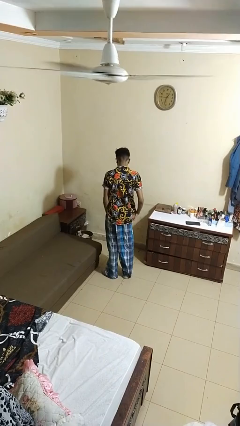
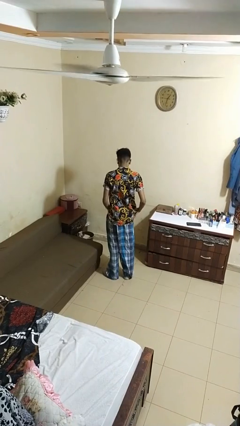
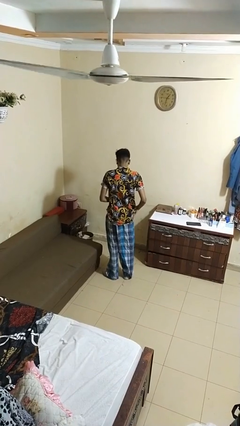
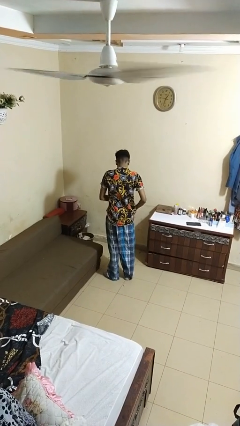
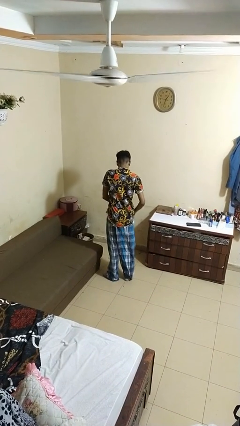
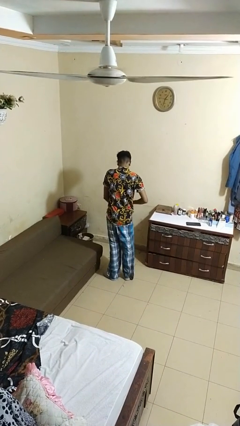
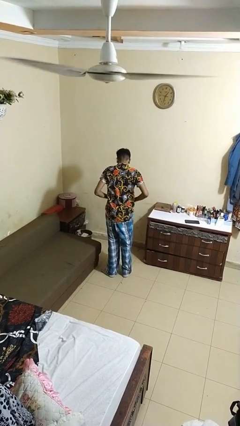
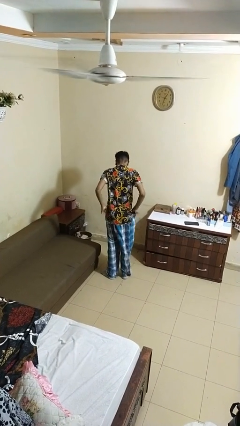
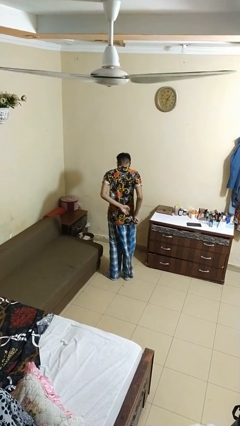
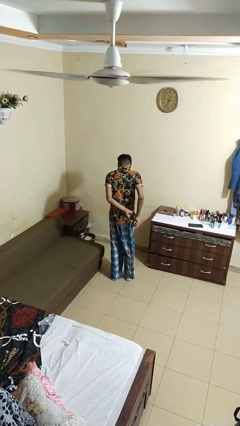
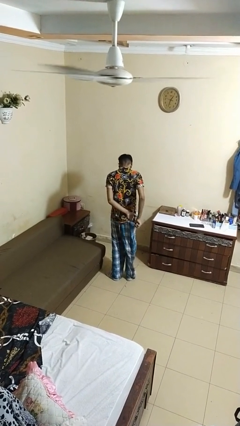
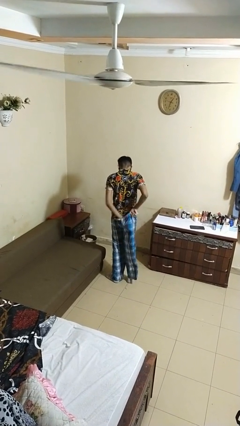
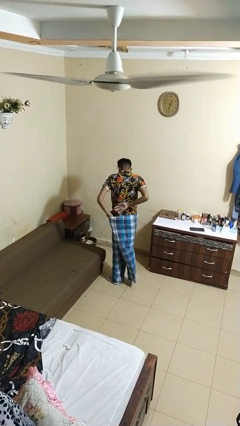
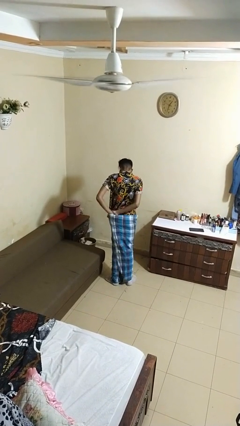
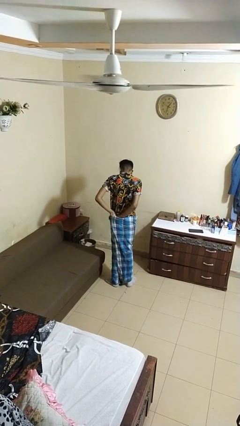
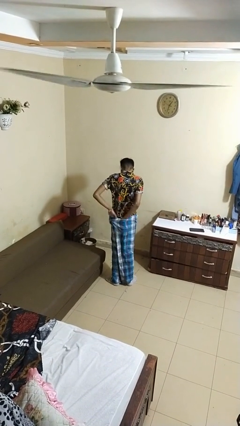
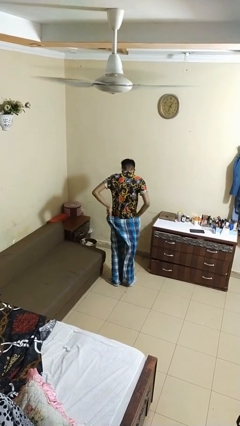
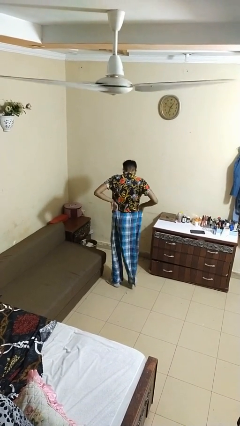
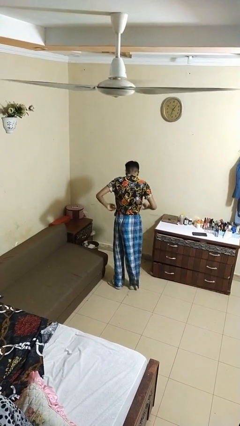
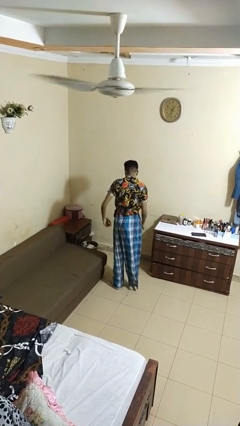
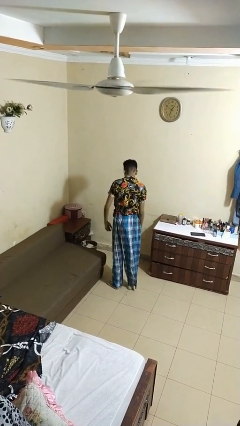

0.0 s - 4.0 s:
person tucks in shirt

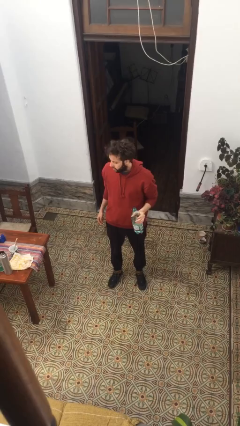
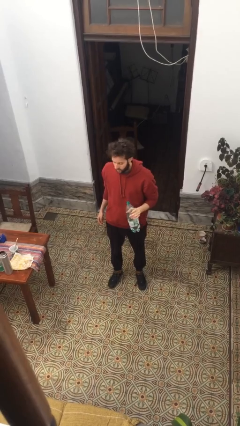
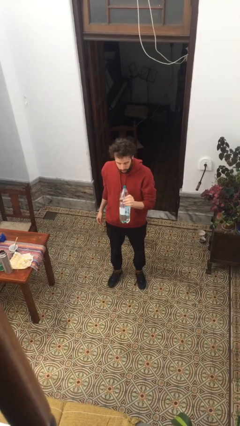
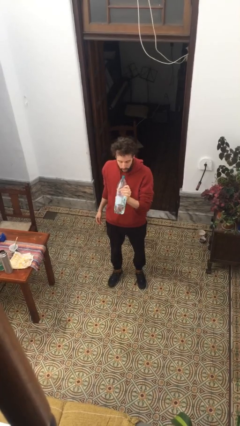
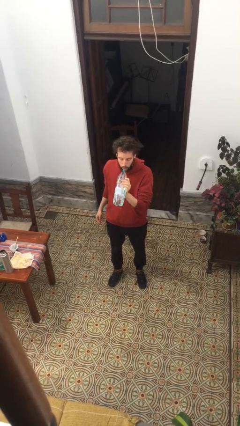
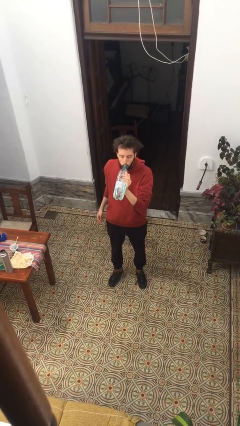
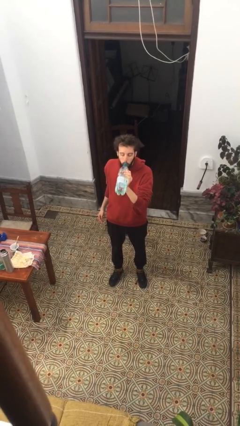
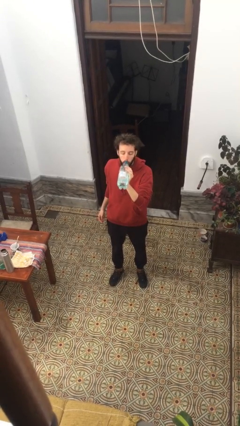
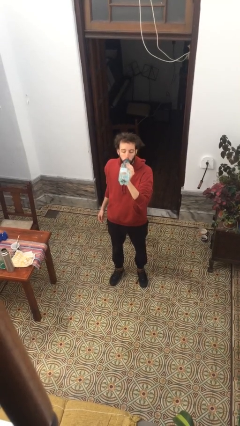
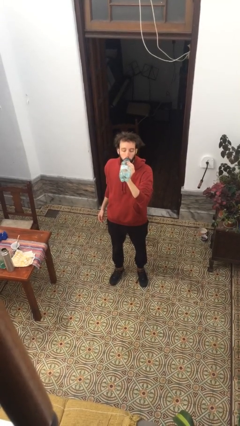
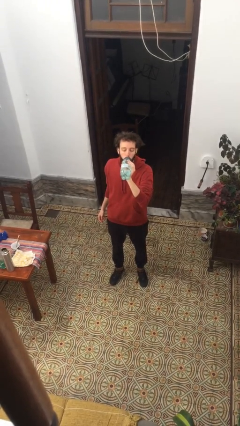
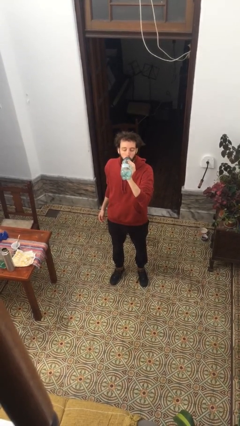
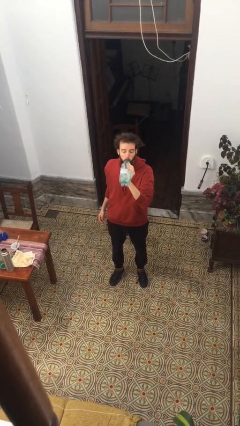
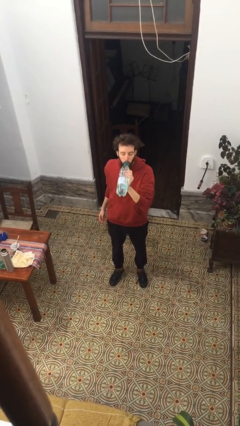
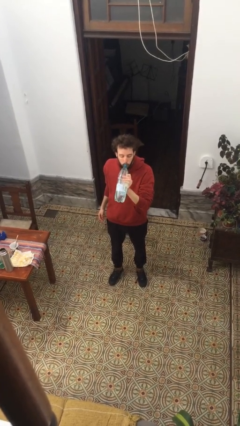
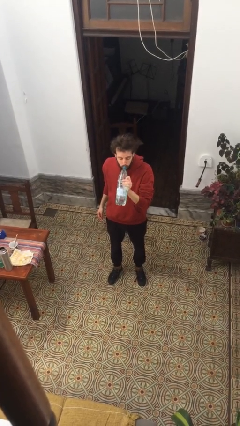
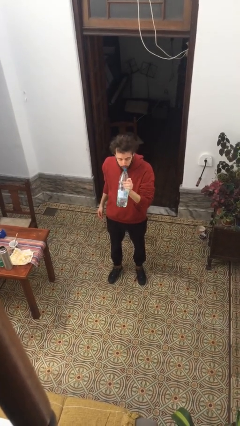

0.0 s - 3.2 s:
person drinks from bottle

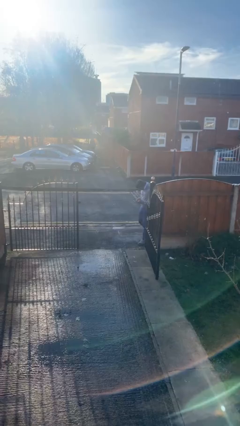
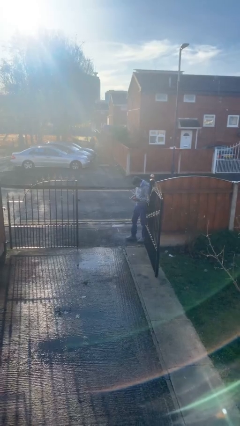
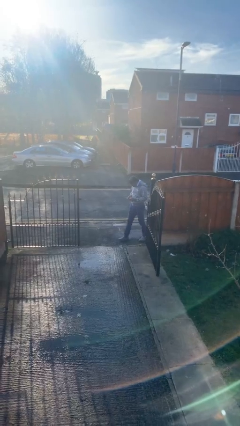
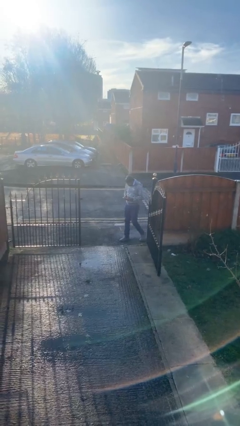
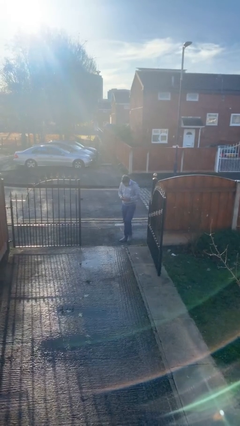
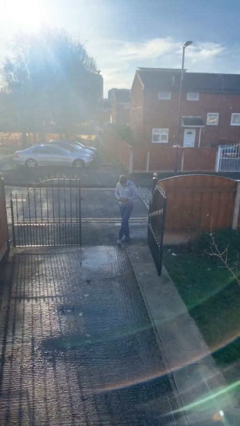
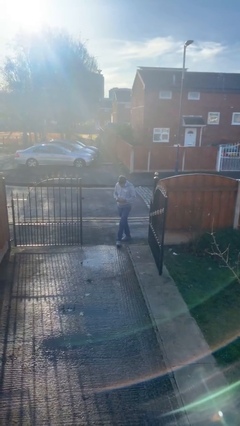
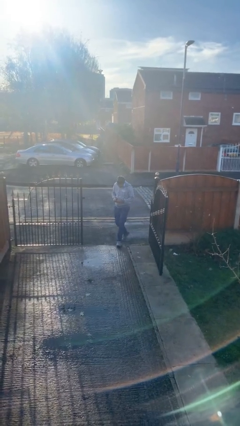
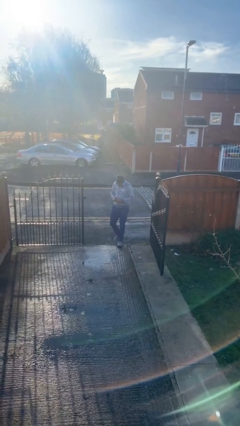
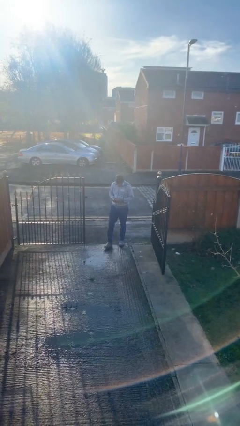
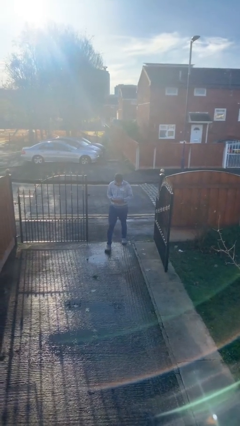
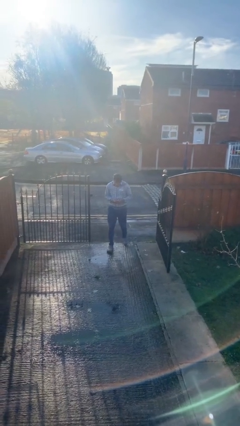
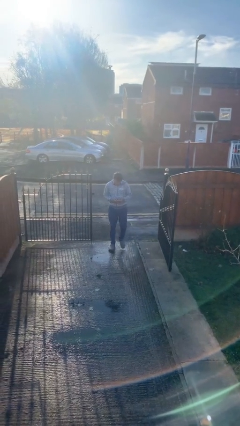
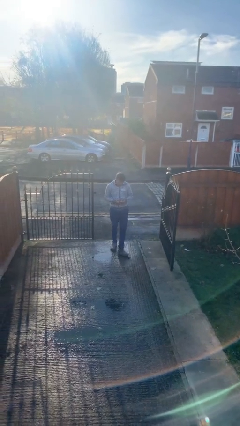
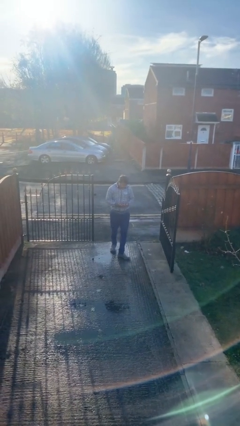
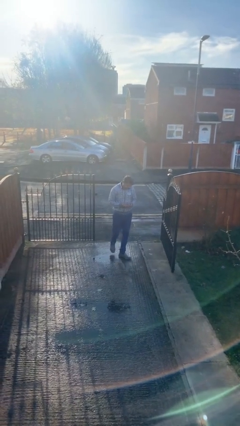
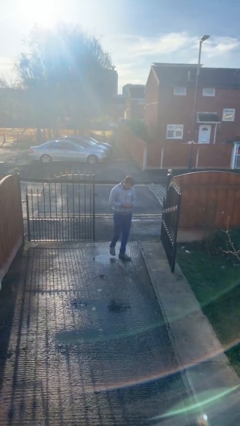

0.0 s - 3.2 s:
person enters scene through structure

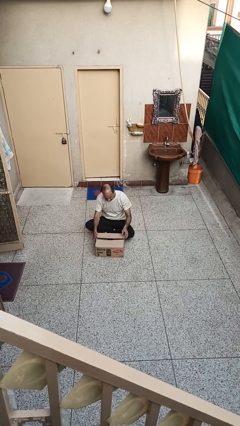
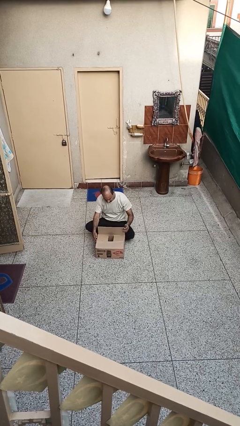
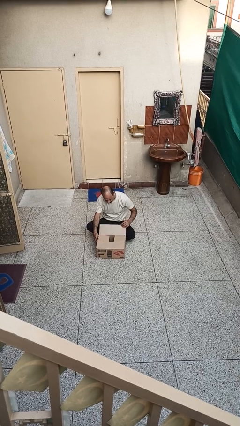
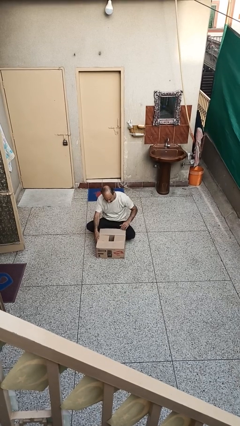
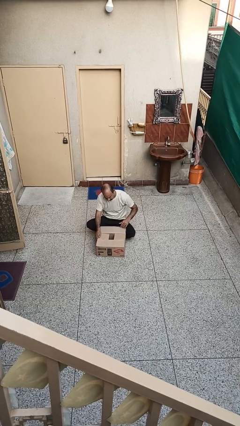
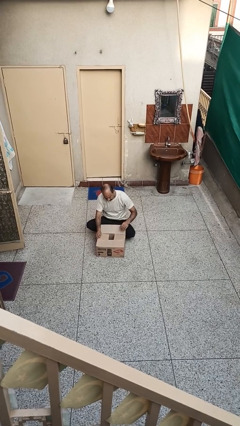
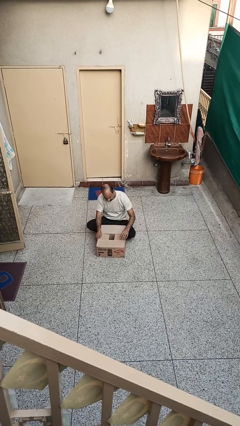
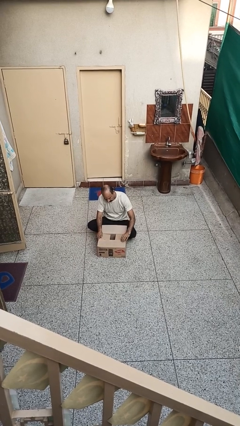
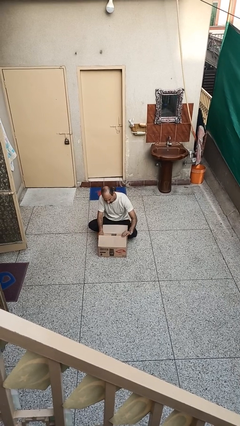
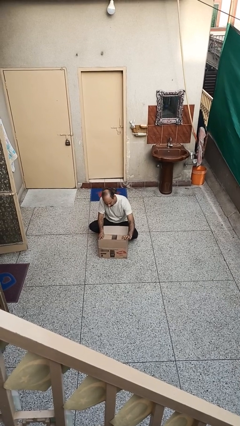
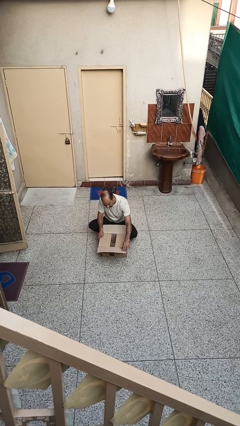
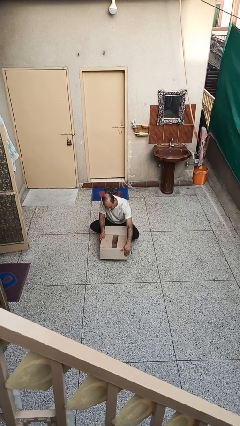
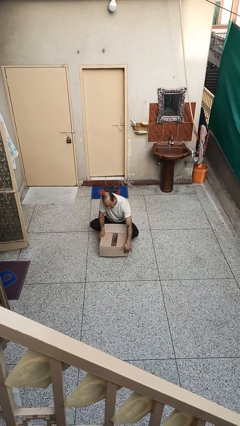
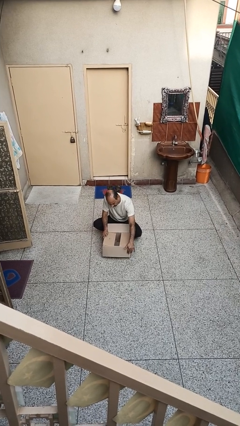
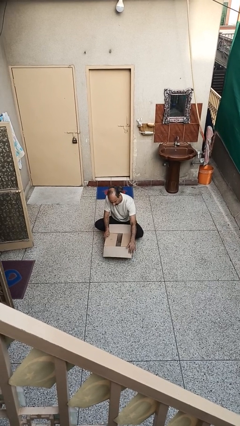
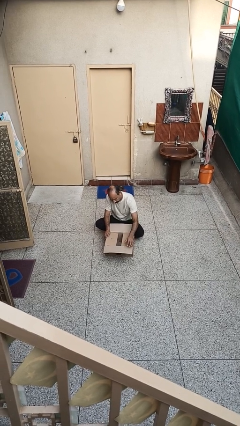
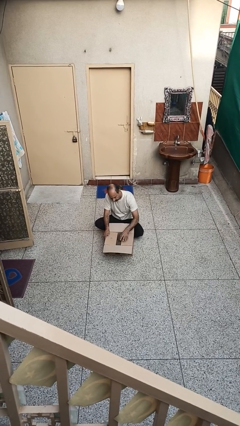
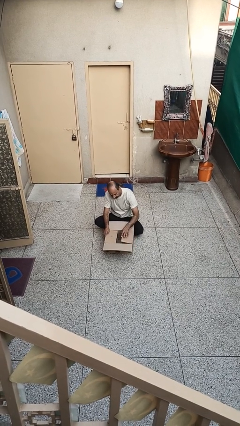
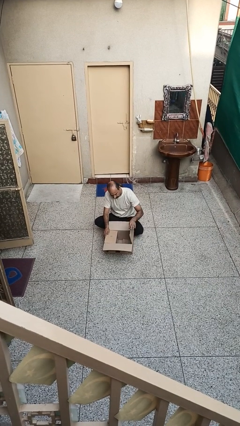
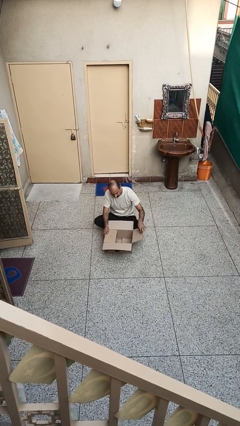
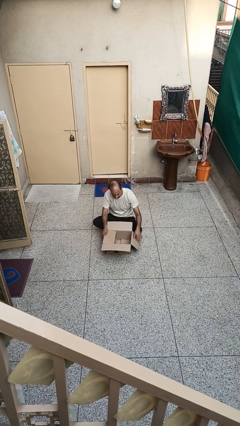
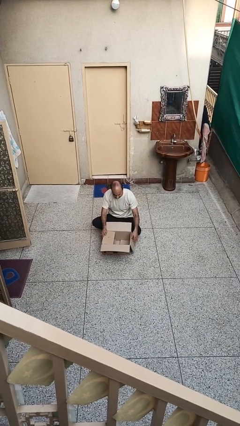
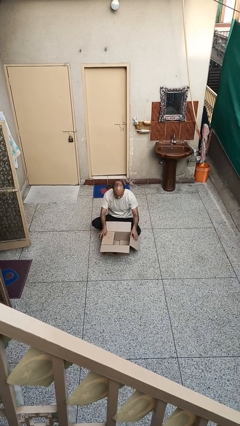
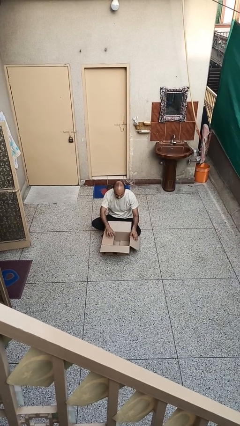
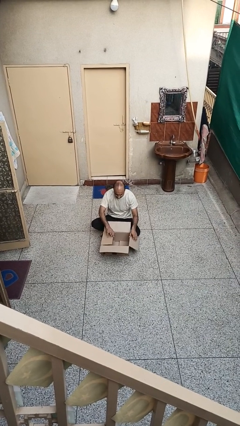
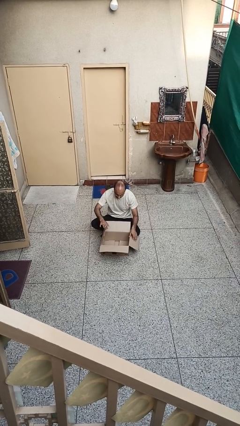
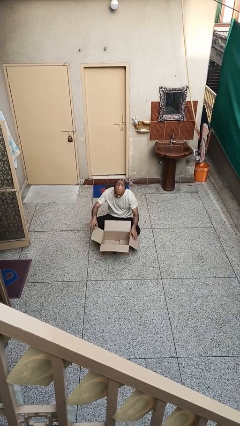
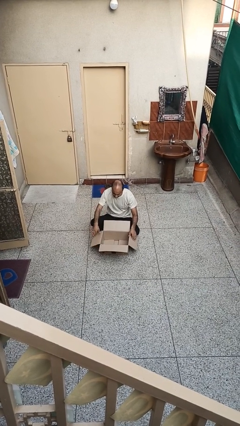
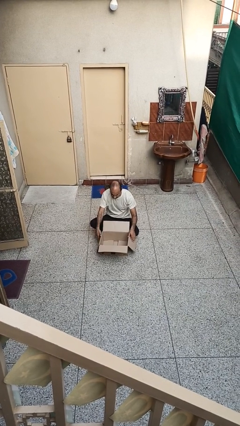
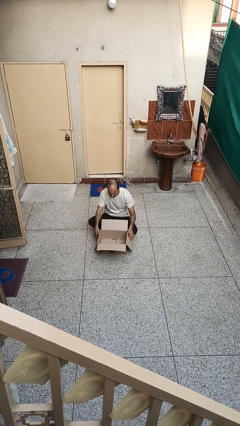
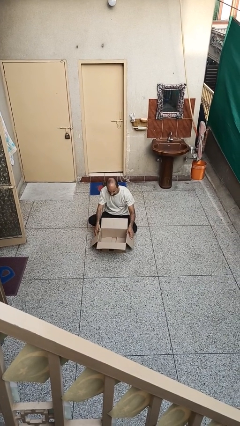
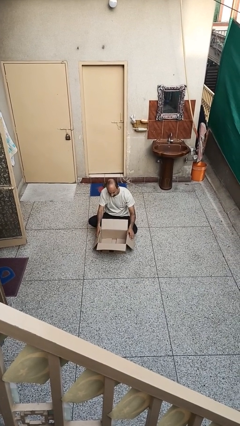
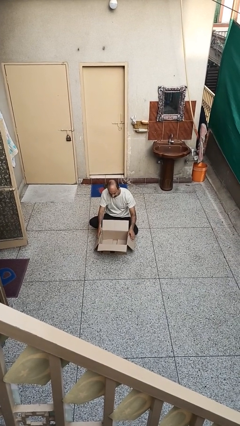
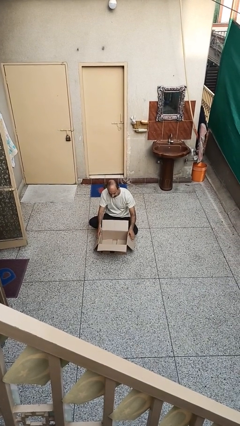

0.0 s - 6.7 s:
person opens box

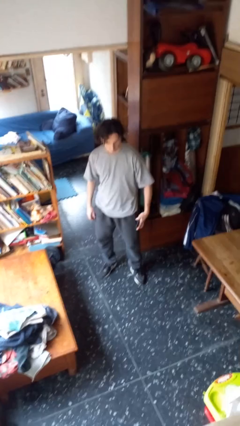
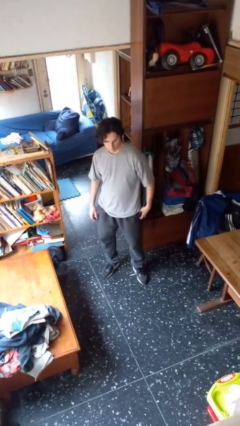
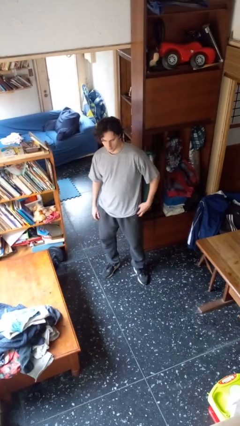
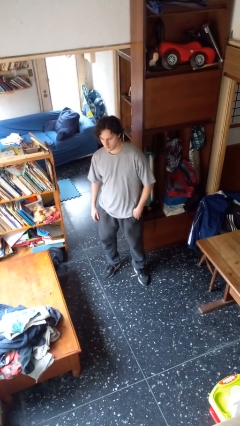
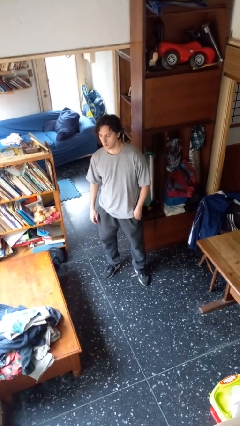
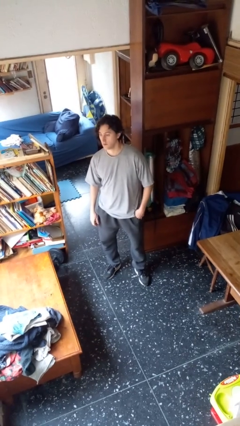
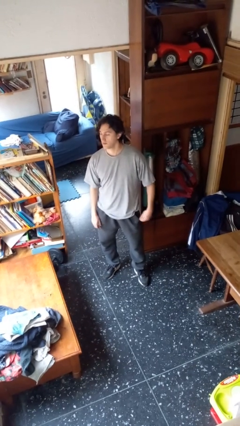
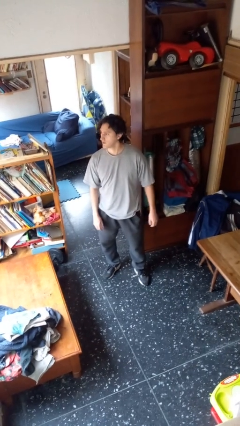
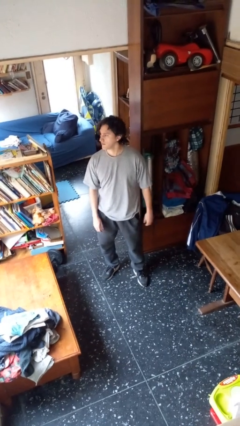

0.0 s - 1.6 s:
person puts phone into pocket
